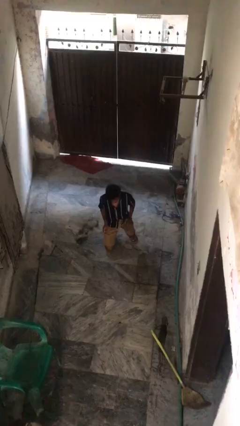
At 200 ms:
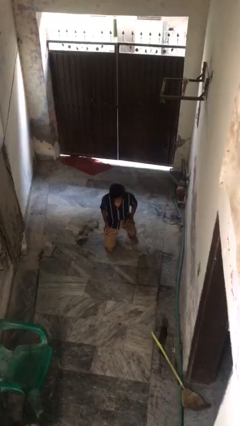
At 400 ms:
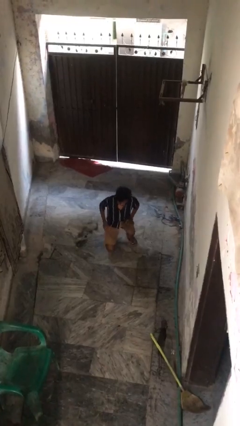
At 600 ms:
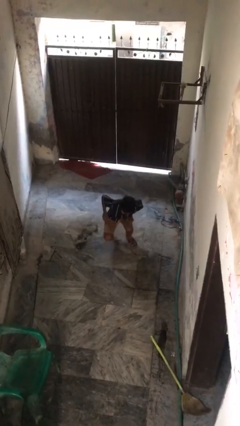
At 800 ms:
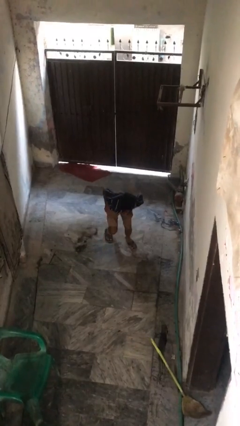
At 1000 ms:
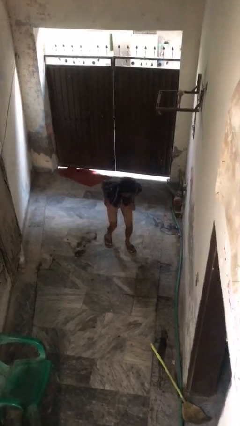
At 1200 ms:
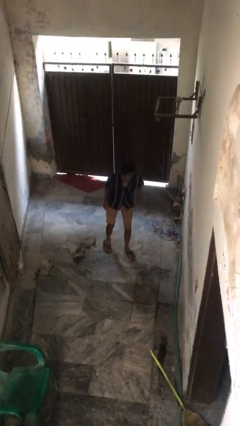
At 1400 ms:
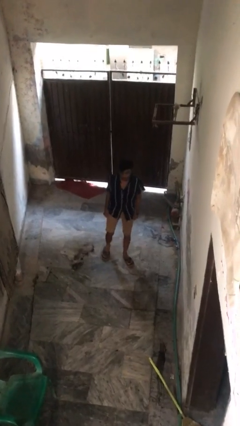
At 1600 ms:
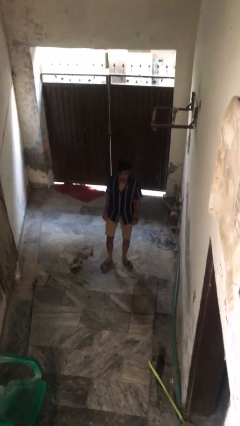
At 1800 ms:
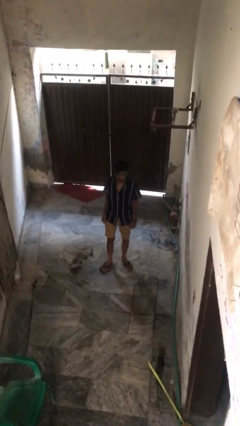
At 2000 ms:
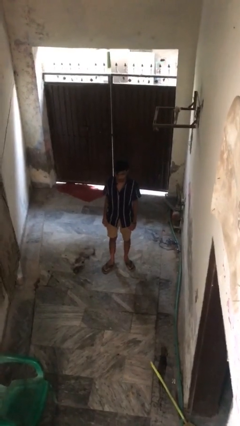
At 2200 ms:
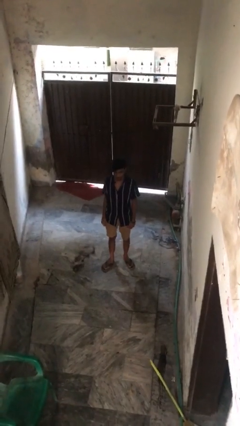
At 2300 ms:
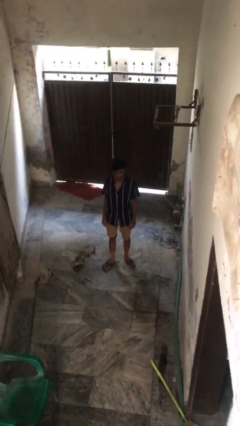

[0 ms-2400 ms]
person stands up from floor

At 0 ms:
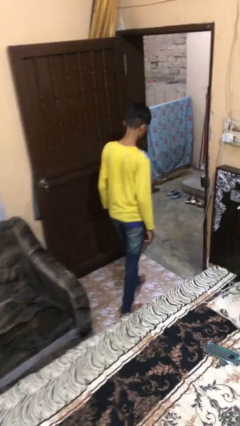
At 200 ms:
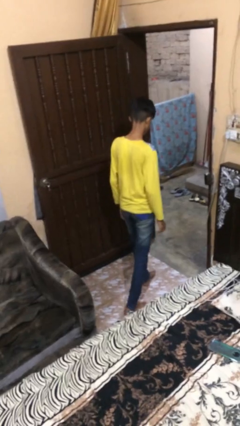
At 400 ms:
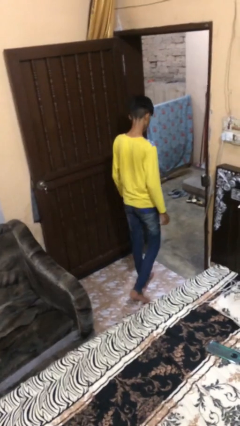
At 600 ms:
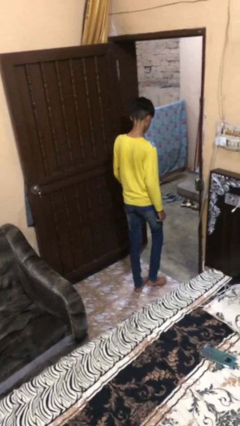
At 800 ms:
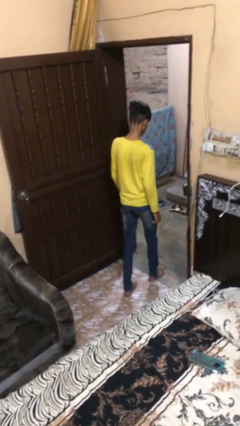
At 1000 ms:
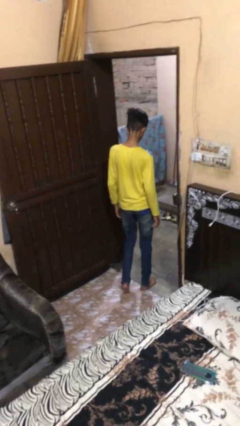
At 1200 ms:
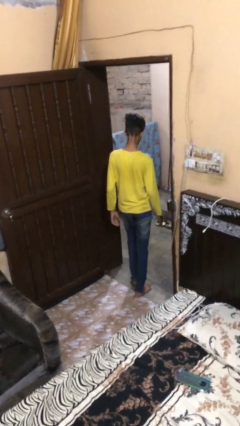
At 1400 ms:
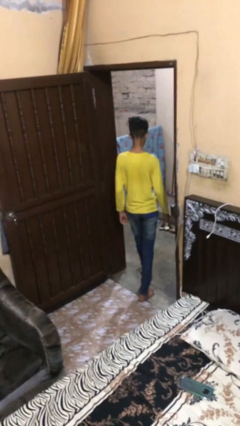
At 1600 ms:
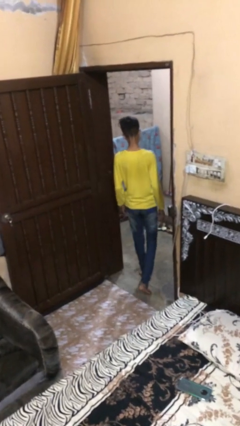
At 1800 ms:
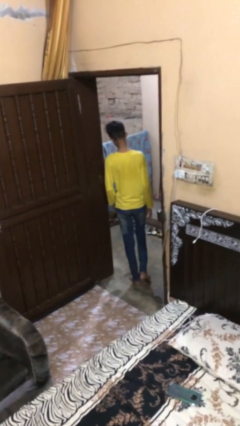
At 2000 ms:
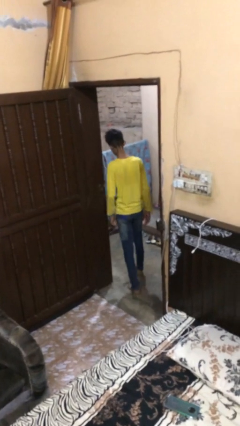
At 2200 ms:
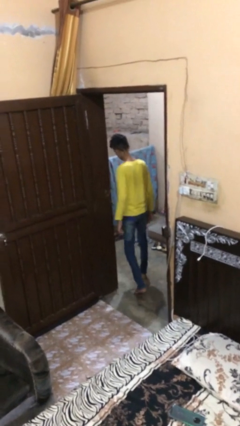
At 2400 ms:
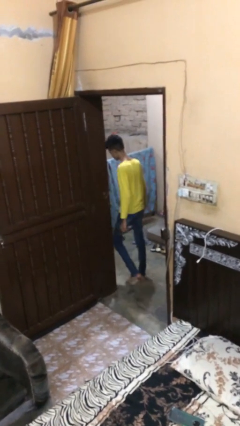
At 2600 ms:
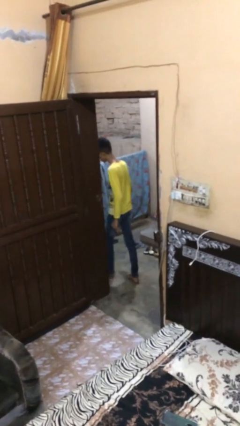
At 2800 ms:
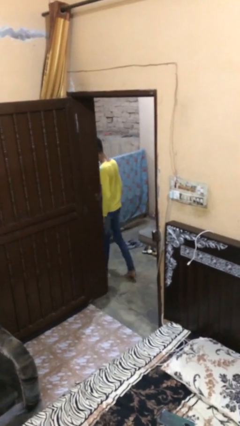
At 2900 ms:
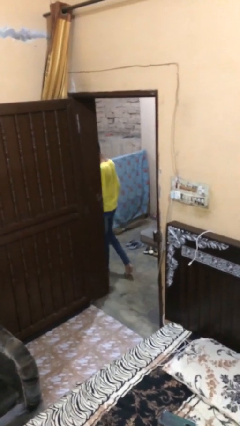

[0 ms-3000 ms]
person exits scene through structure

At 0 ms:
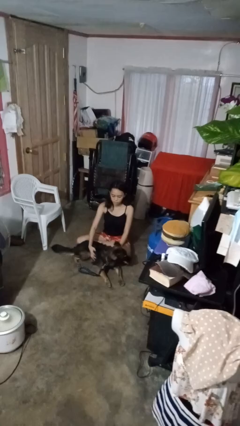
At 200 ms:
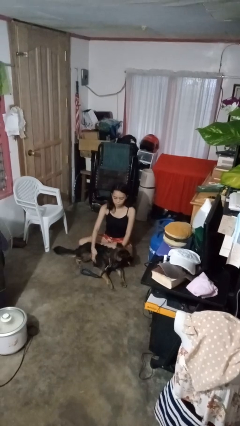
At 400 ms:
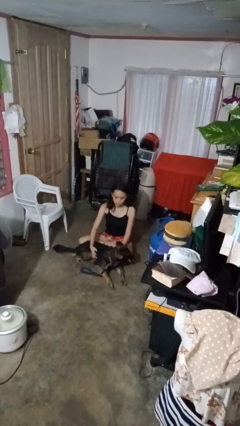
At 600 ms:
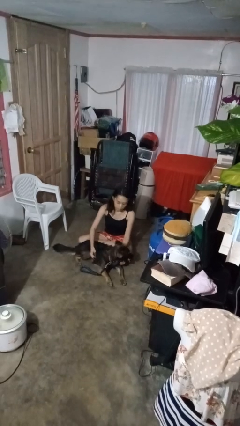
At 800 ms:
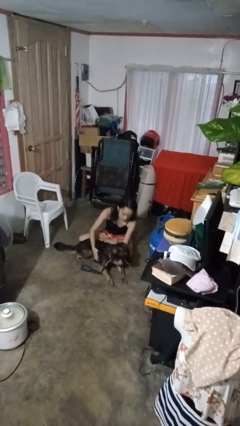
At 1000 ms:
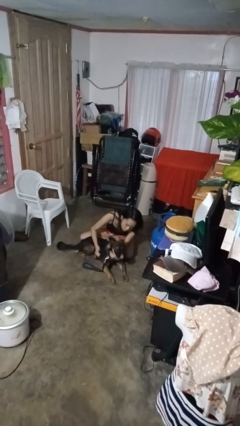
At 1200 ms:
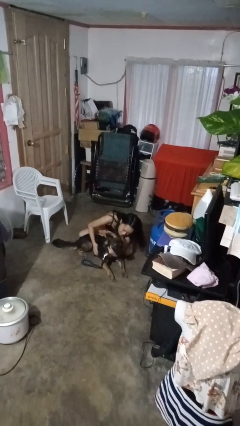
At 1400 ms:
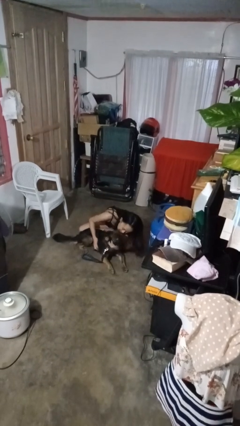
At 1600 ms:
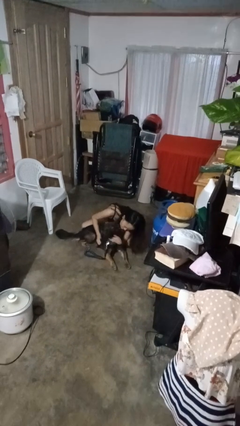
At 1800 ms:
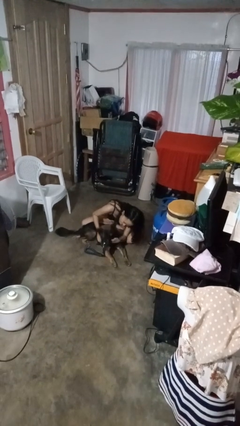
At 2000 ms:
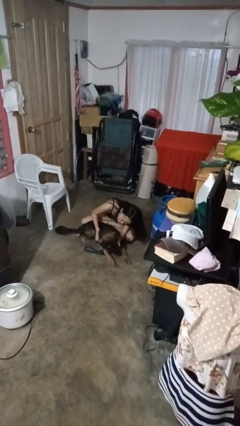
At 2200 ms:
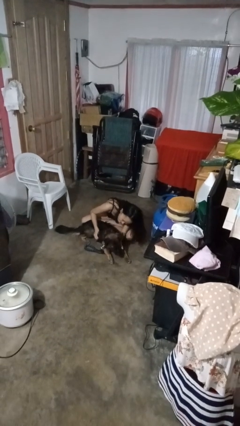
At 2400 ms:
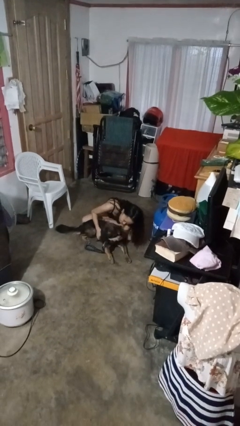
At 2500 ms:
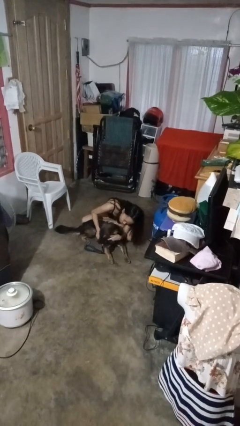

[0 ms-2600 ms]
person hugs dog

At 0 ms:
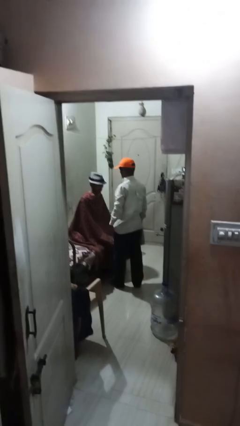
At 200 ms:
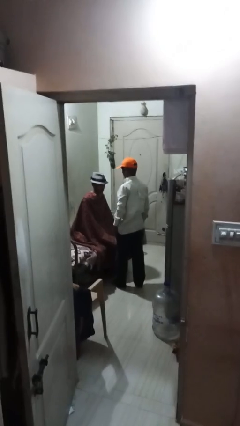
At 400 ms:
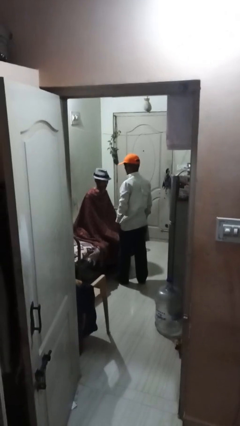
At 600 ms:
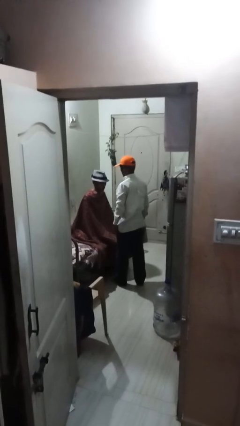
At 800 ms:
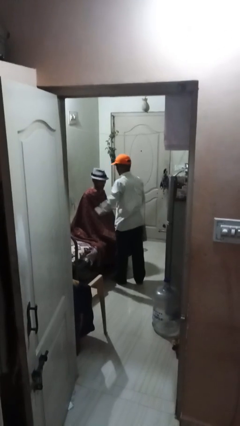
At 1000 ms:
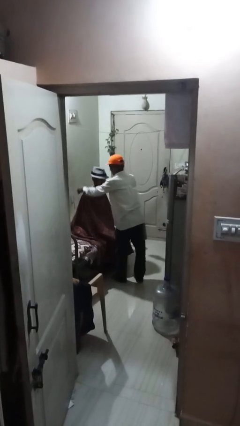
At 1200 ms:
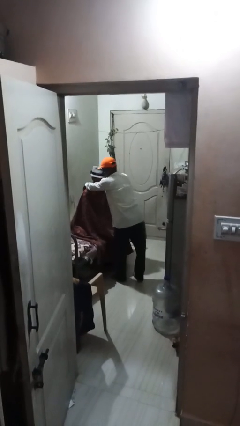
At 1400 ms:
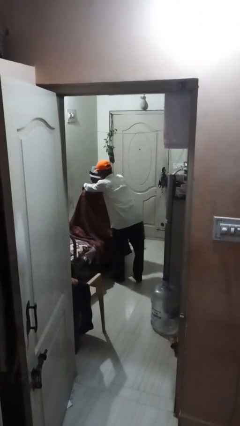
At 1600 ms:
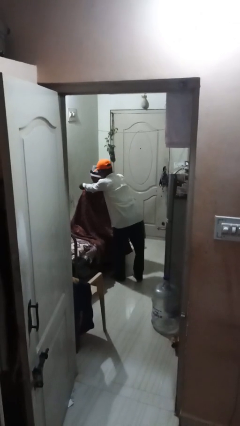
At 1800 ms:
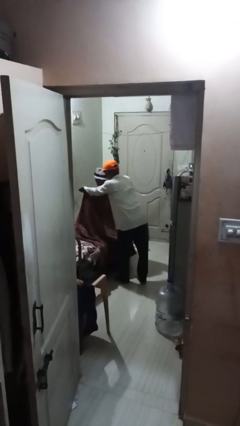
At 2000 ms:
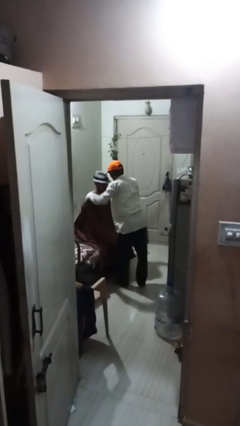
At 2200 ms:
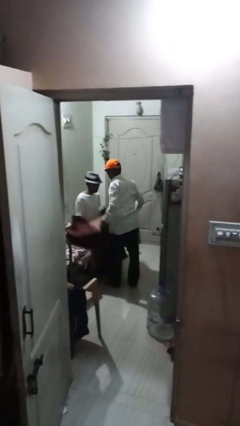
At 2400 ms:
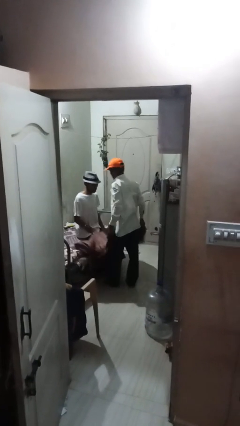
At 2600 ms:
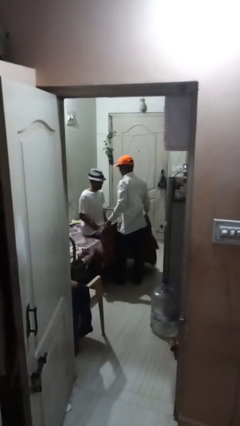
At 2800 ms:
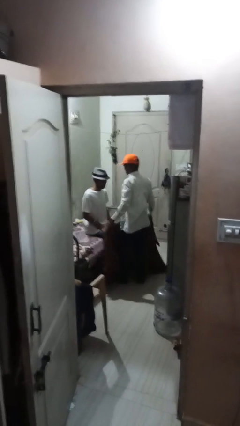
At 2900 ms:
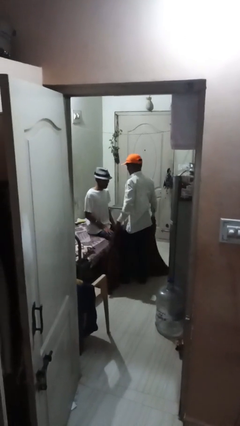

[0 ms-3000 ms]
person covers friend with blanket

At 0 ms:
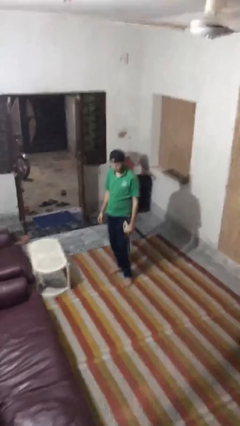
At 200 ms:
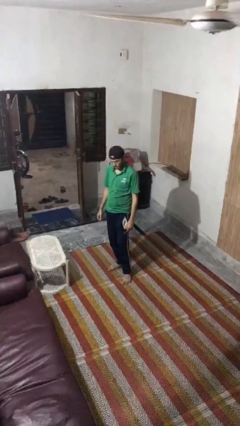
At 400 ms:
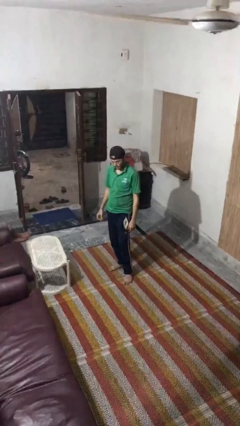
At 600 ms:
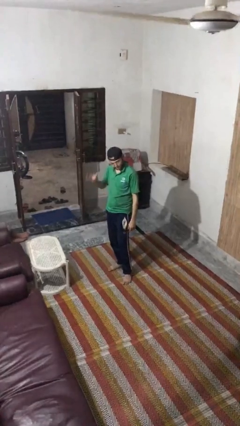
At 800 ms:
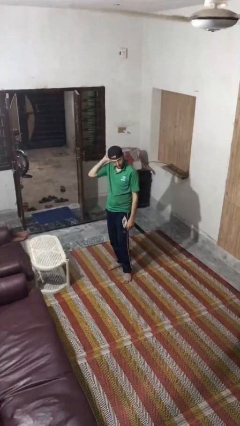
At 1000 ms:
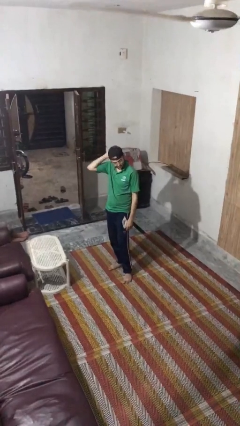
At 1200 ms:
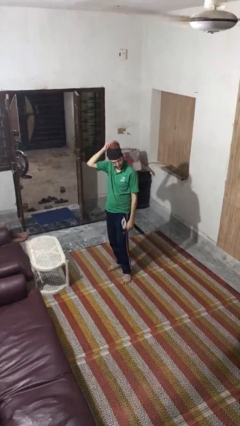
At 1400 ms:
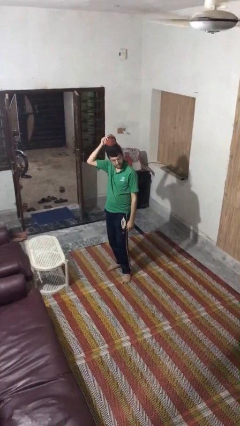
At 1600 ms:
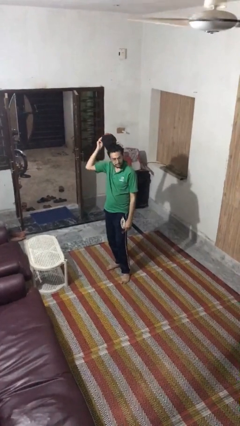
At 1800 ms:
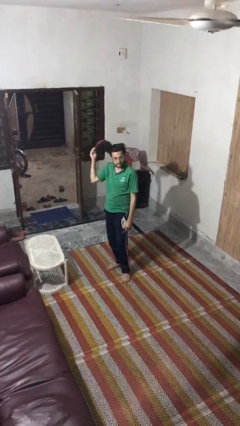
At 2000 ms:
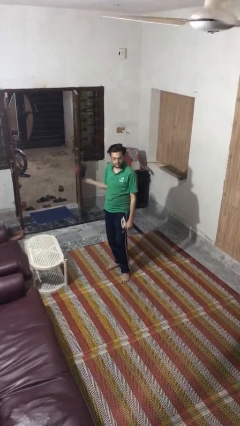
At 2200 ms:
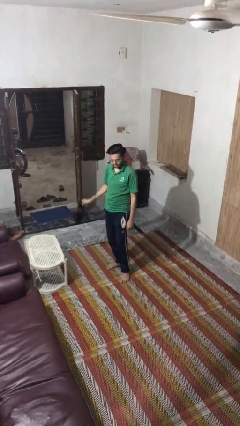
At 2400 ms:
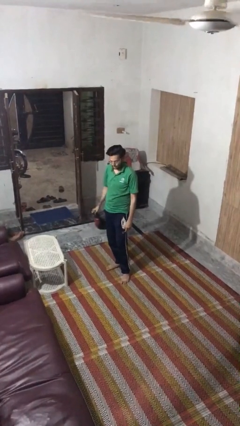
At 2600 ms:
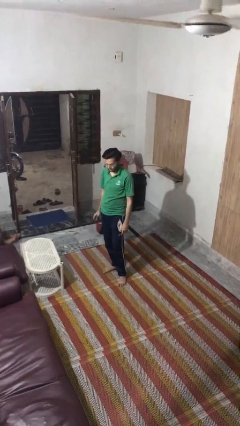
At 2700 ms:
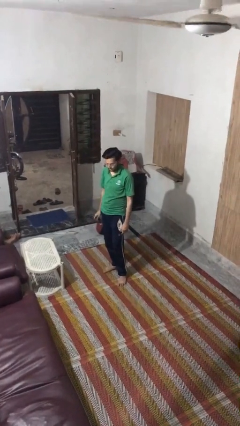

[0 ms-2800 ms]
person takes off hat

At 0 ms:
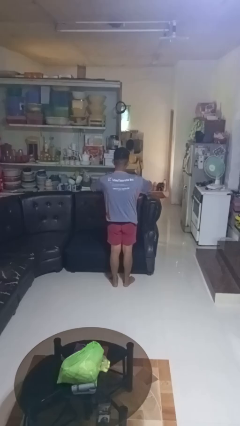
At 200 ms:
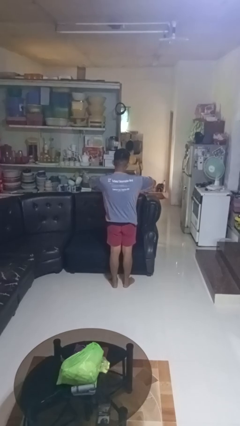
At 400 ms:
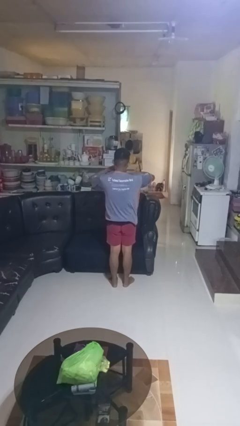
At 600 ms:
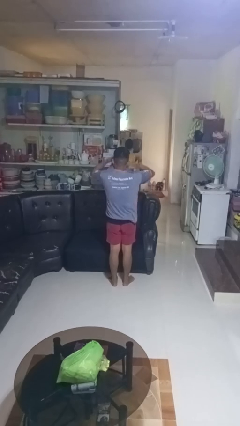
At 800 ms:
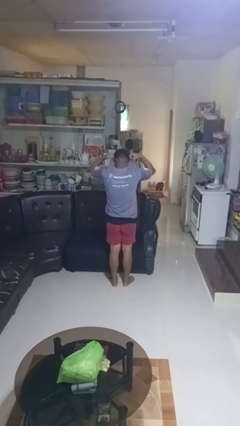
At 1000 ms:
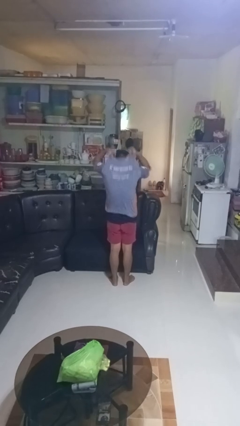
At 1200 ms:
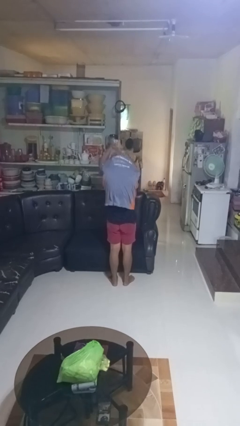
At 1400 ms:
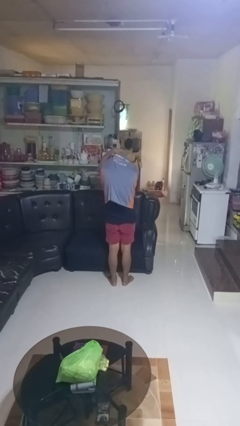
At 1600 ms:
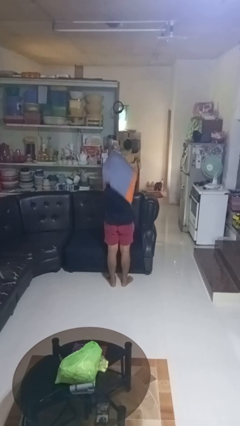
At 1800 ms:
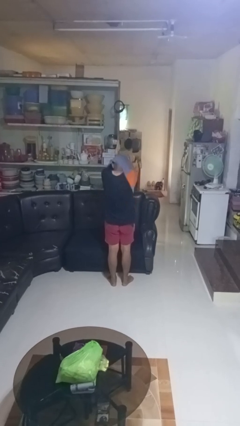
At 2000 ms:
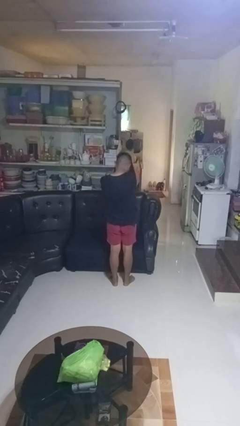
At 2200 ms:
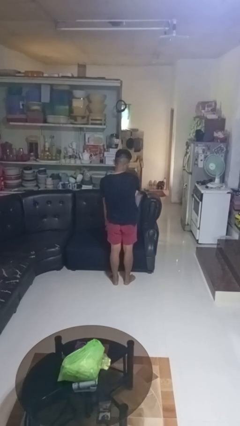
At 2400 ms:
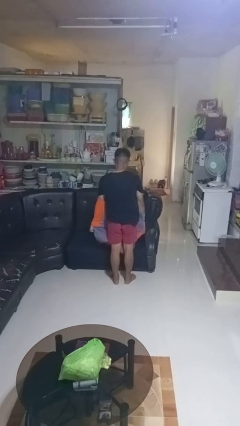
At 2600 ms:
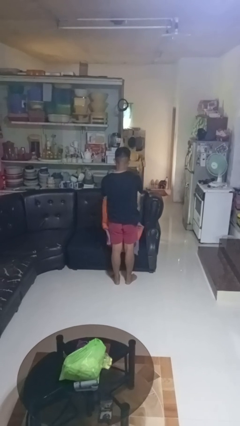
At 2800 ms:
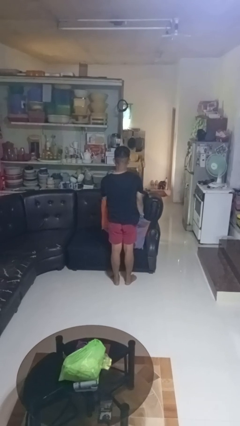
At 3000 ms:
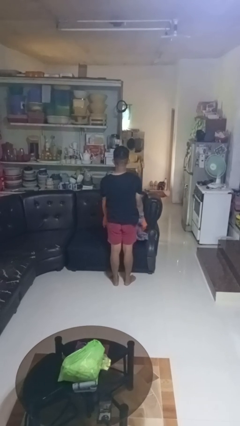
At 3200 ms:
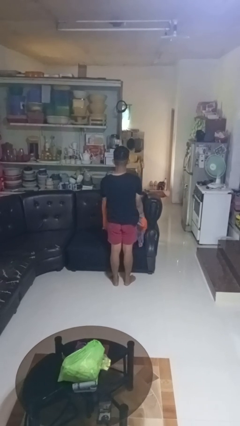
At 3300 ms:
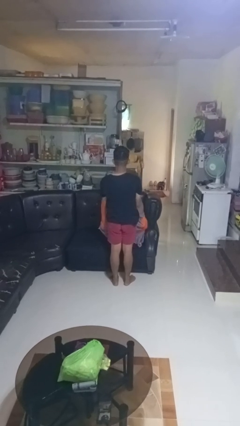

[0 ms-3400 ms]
person takes off shirt

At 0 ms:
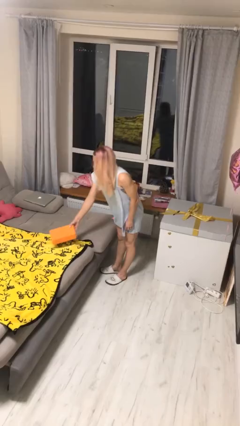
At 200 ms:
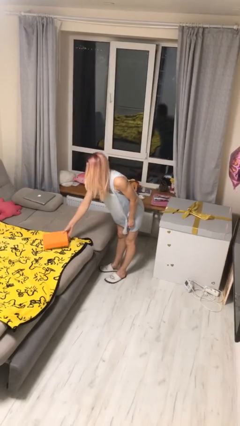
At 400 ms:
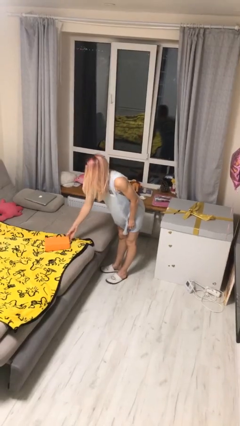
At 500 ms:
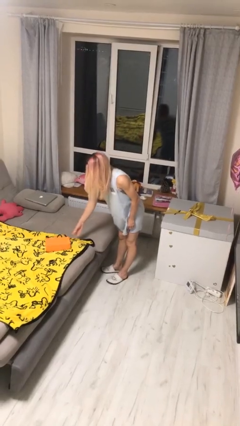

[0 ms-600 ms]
person puts down object on bed
